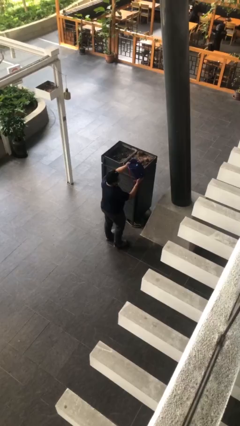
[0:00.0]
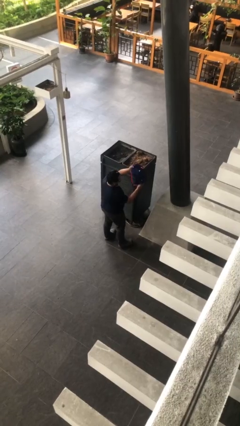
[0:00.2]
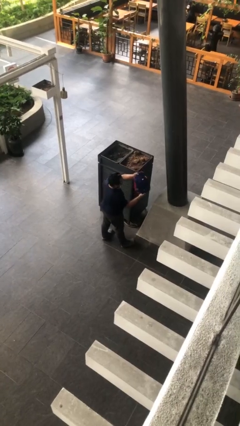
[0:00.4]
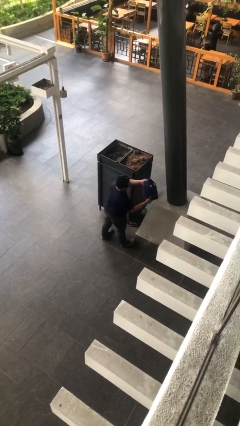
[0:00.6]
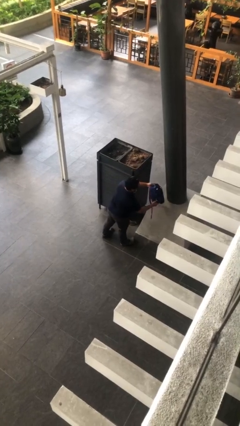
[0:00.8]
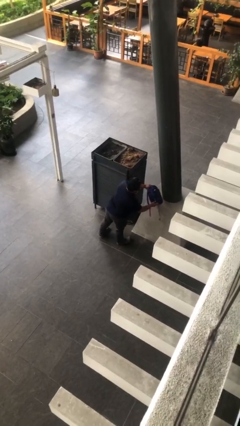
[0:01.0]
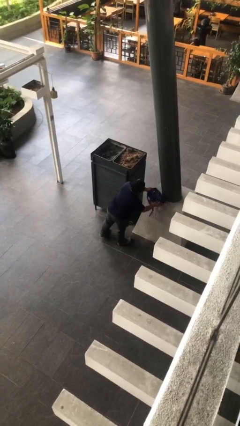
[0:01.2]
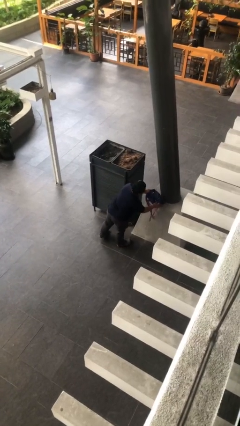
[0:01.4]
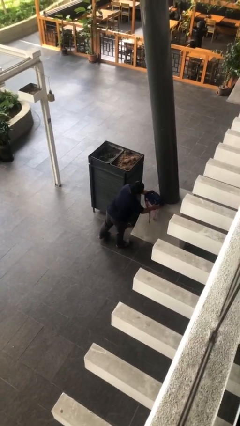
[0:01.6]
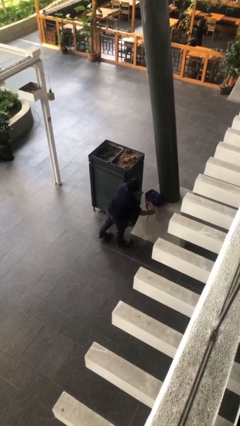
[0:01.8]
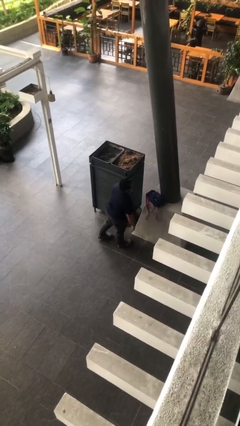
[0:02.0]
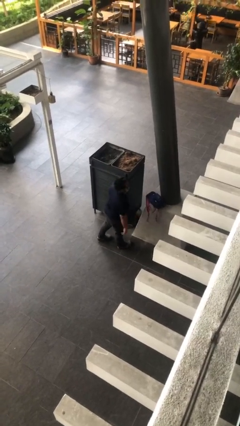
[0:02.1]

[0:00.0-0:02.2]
person puts down object on table

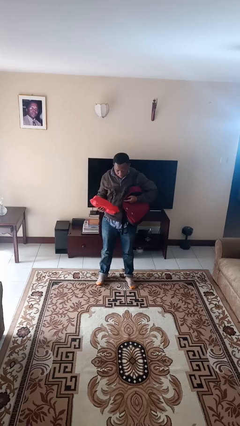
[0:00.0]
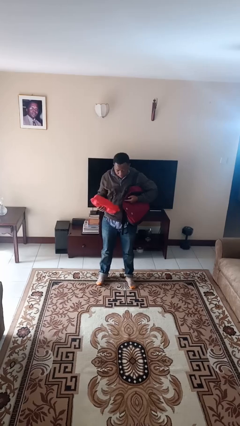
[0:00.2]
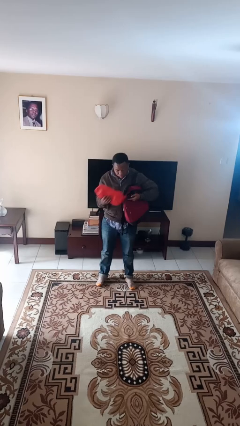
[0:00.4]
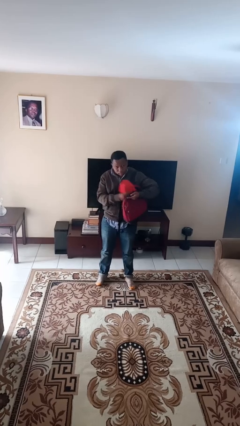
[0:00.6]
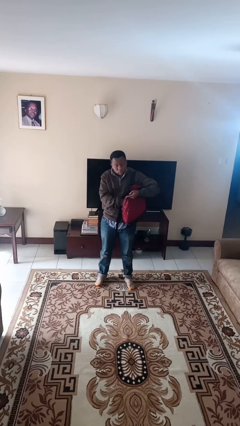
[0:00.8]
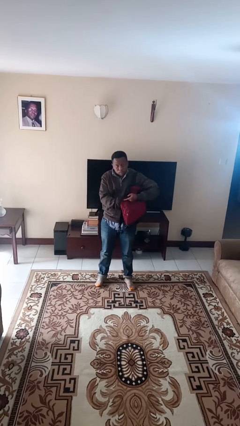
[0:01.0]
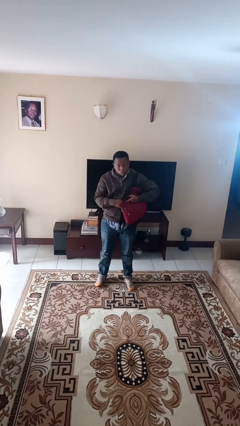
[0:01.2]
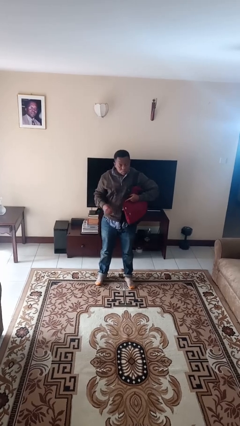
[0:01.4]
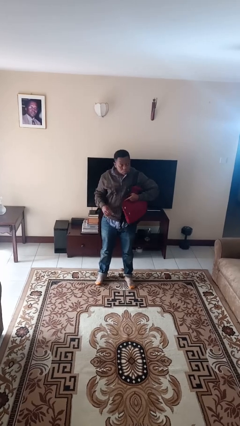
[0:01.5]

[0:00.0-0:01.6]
person puts object into backpack

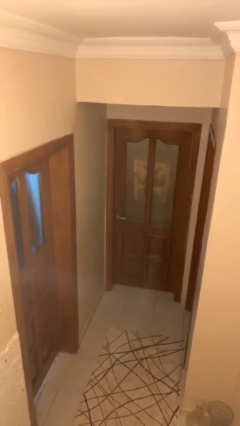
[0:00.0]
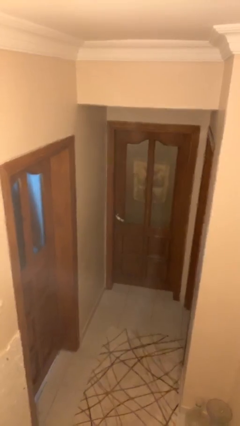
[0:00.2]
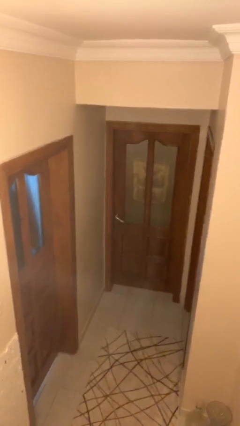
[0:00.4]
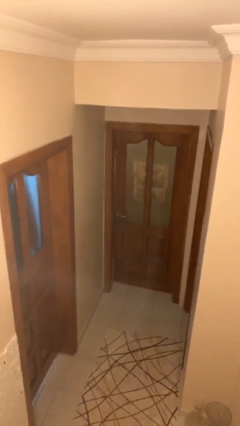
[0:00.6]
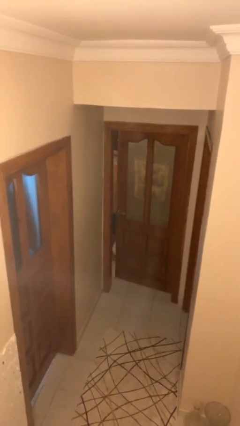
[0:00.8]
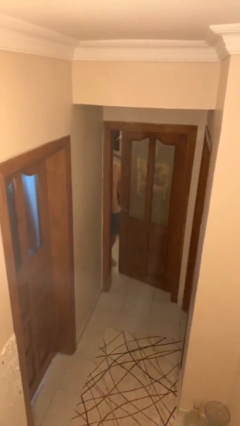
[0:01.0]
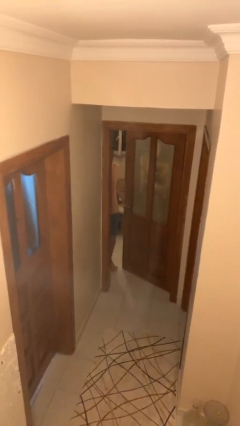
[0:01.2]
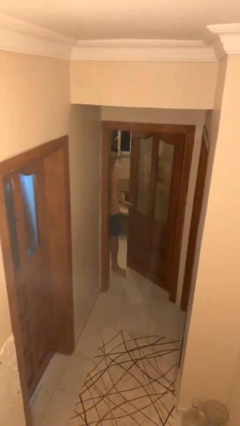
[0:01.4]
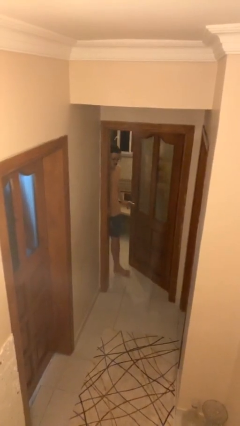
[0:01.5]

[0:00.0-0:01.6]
person opens facility door

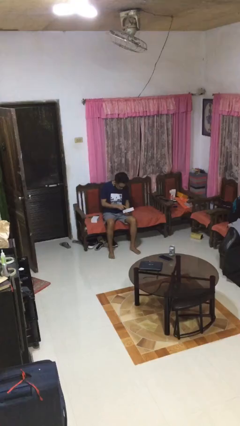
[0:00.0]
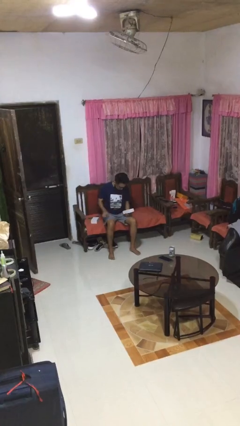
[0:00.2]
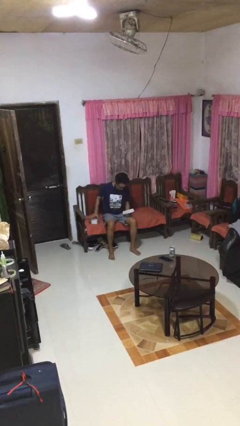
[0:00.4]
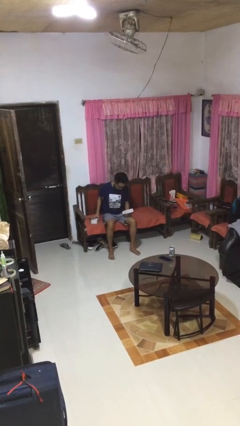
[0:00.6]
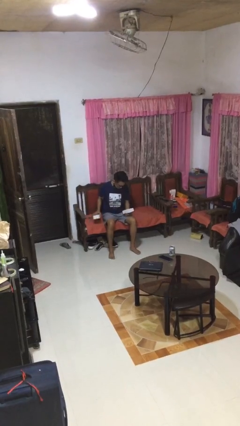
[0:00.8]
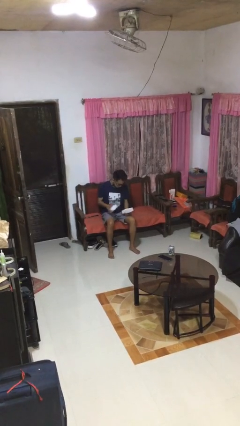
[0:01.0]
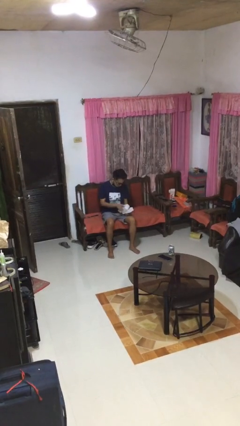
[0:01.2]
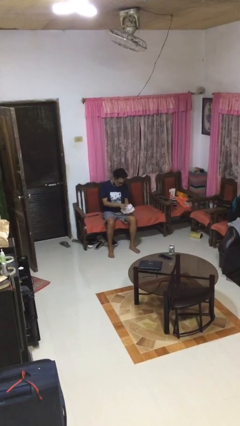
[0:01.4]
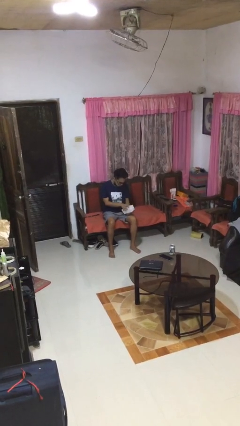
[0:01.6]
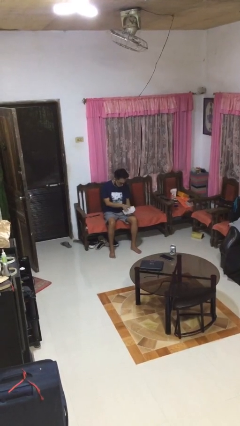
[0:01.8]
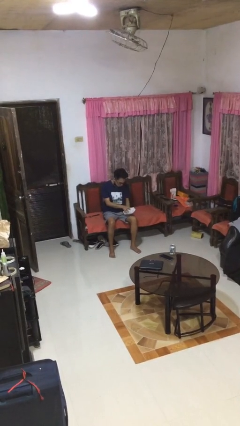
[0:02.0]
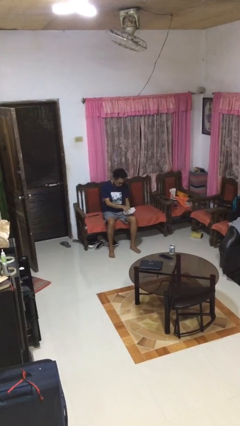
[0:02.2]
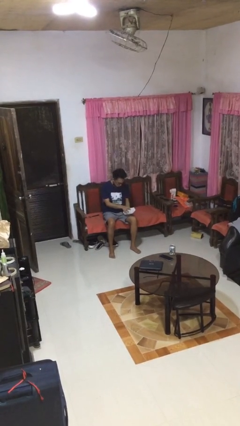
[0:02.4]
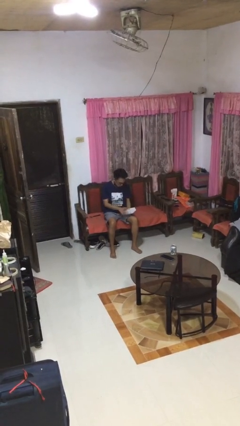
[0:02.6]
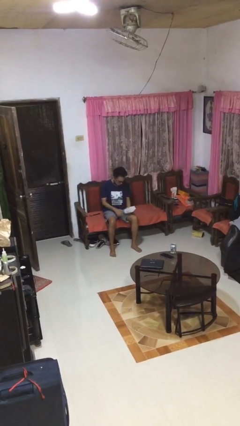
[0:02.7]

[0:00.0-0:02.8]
person closes jewelry box

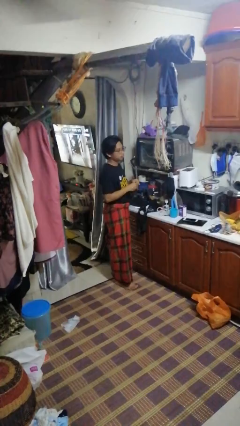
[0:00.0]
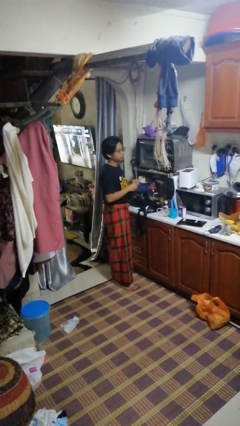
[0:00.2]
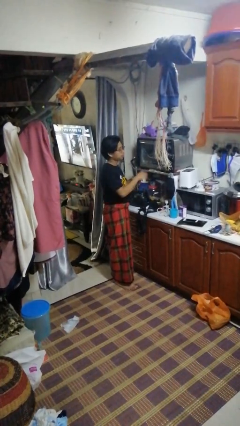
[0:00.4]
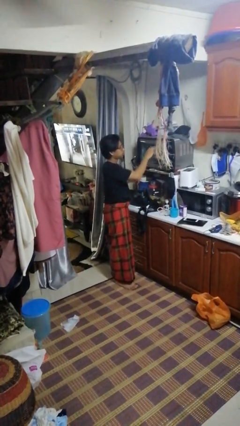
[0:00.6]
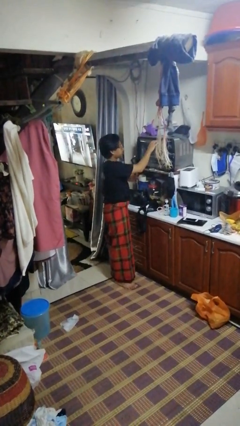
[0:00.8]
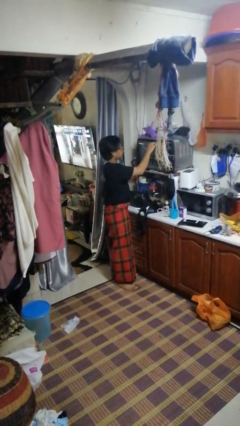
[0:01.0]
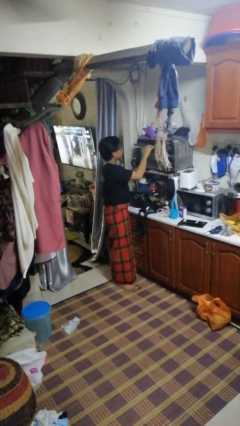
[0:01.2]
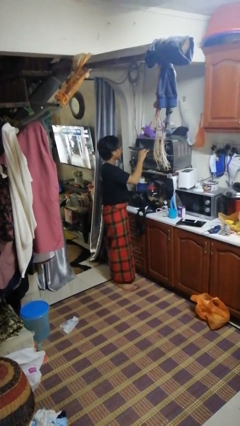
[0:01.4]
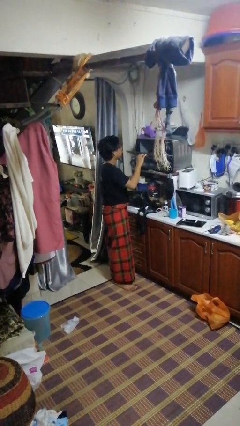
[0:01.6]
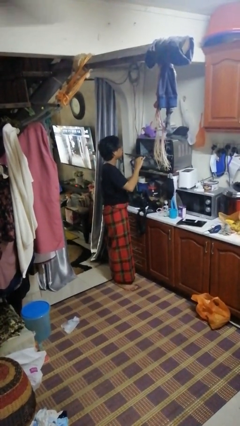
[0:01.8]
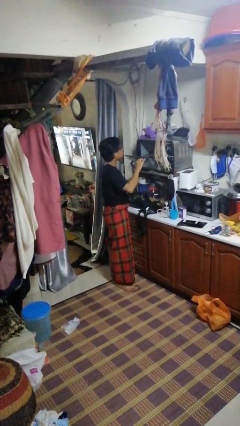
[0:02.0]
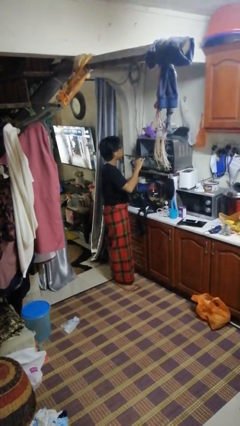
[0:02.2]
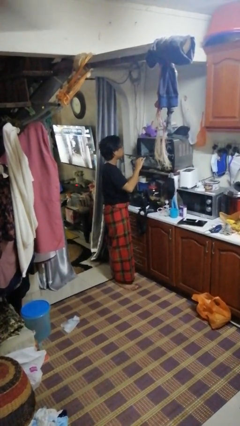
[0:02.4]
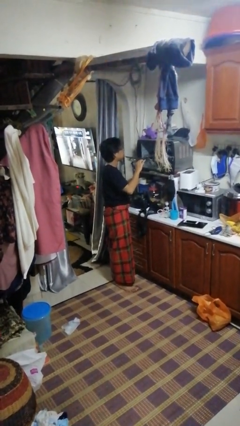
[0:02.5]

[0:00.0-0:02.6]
person opens oven door

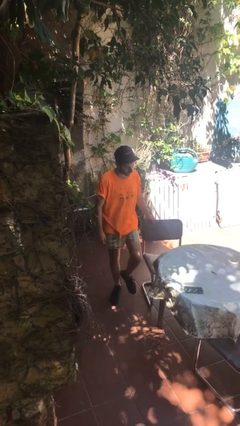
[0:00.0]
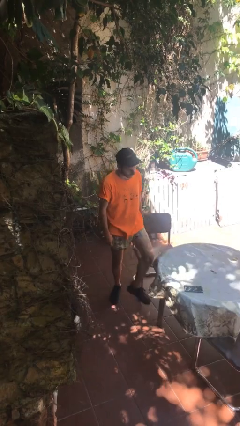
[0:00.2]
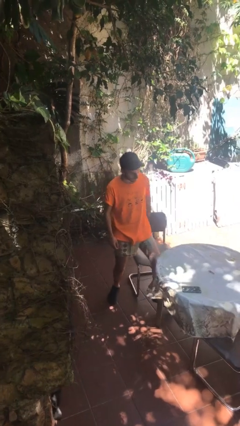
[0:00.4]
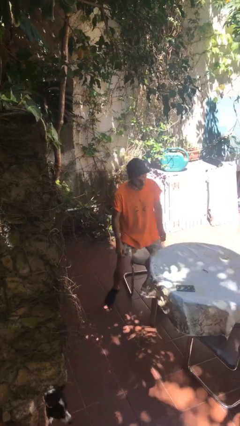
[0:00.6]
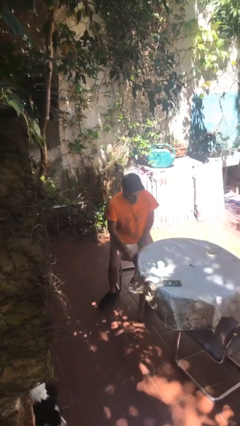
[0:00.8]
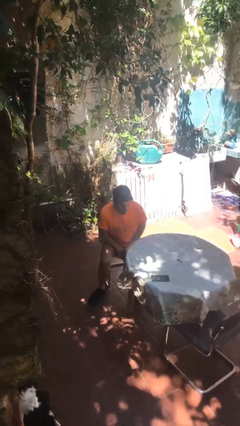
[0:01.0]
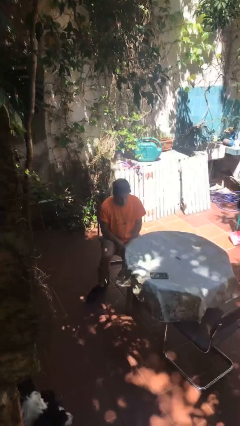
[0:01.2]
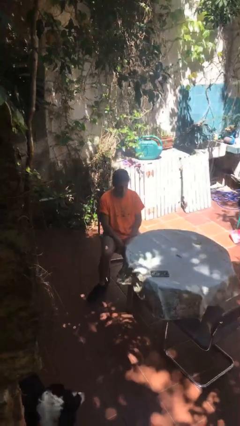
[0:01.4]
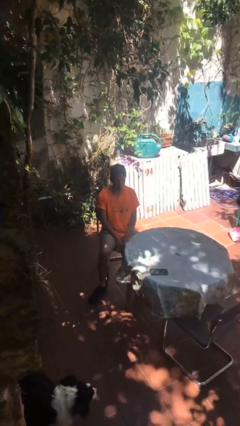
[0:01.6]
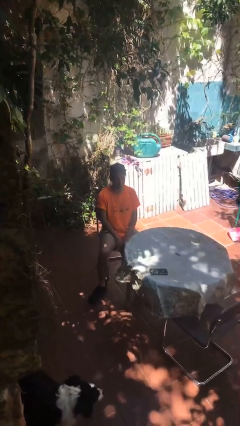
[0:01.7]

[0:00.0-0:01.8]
person sits down

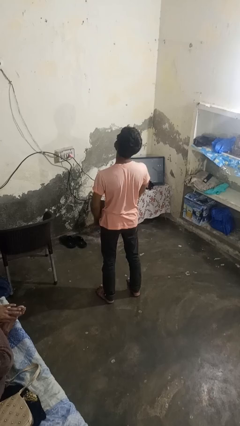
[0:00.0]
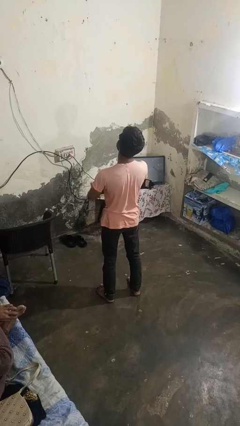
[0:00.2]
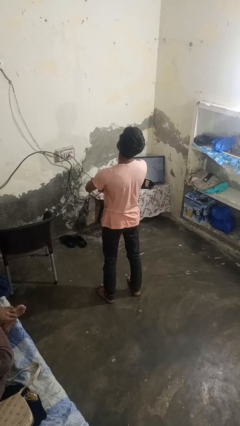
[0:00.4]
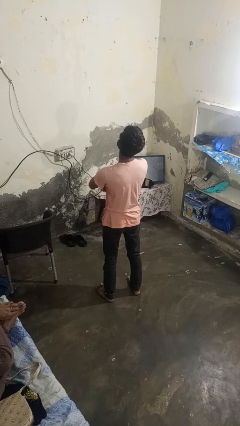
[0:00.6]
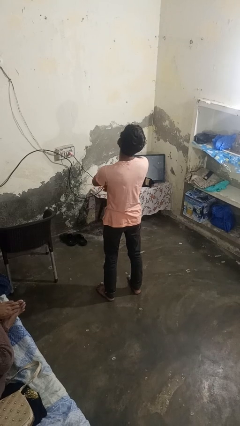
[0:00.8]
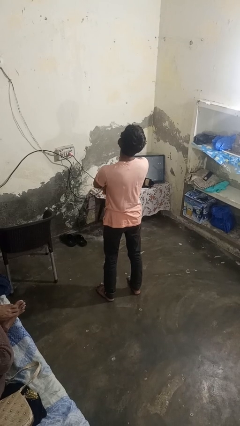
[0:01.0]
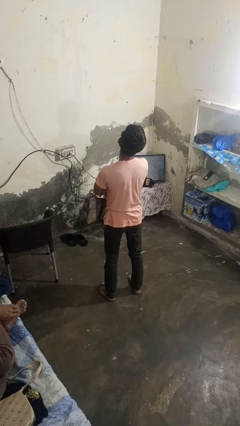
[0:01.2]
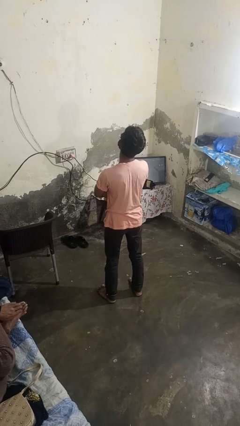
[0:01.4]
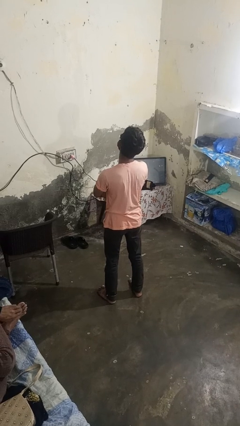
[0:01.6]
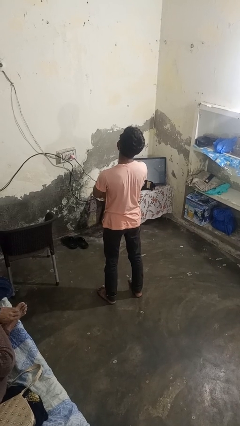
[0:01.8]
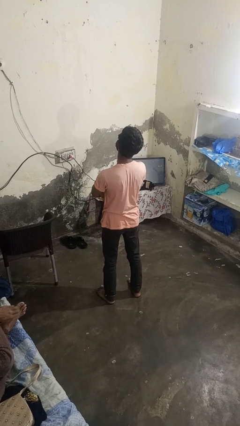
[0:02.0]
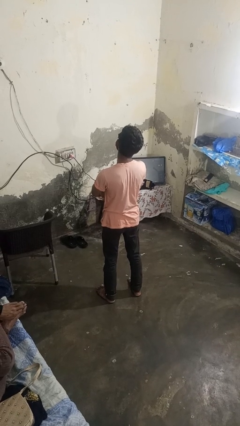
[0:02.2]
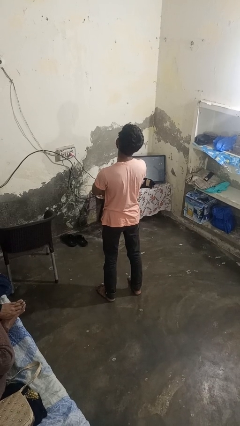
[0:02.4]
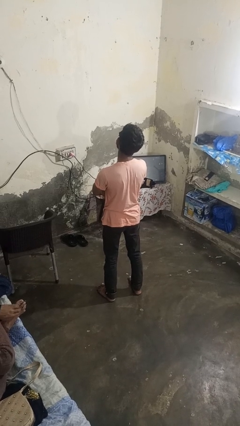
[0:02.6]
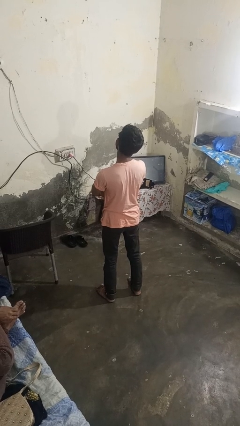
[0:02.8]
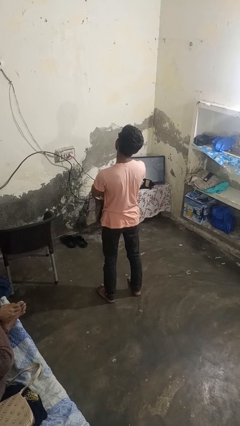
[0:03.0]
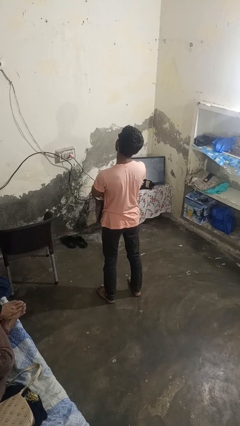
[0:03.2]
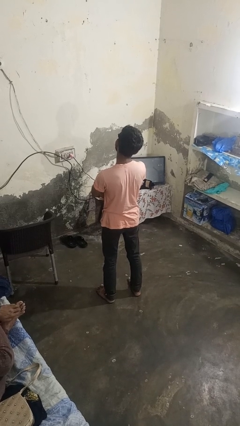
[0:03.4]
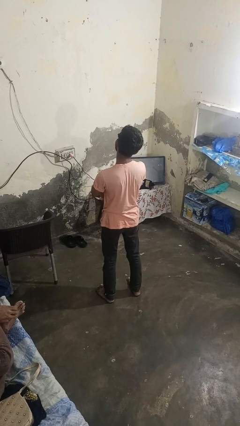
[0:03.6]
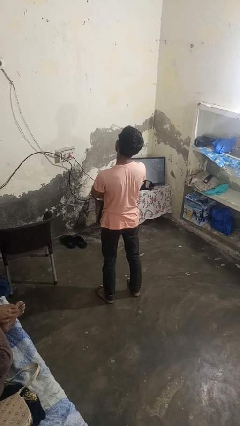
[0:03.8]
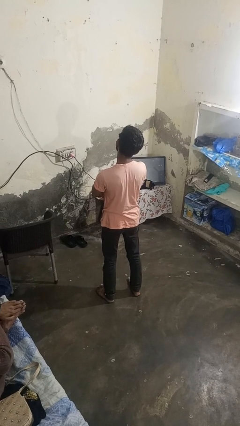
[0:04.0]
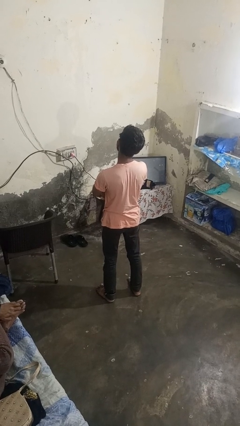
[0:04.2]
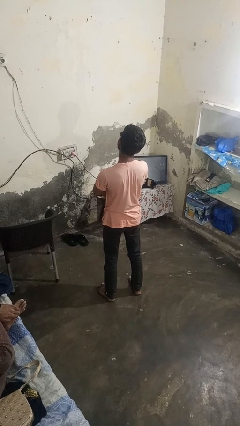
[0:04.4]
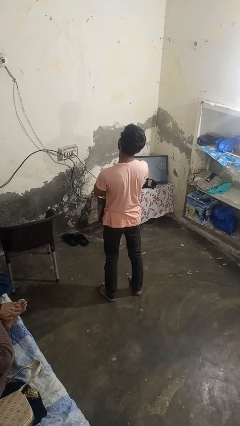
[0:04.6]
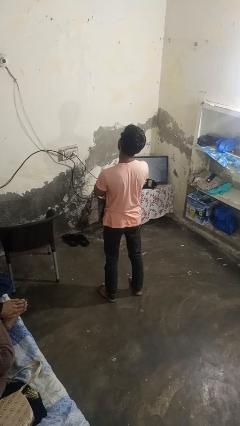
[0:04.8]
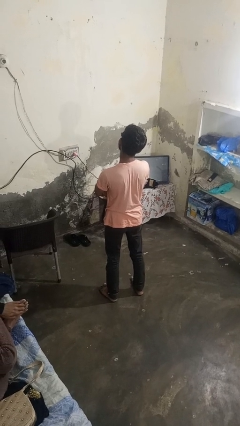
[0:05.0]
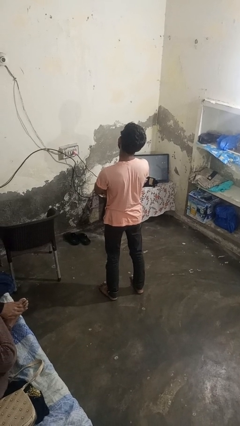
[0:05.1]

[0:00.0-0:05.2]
person crosses arms
